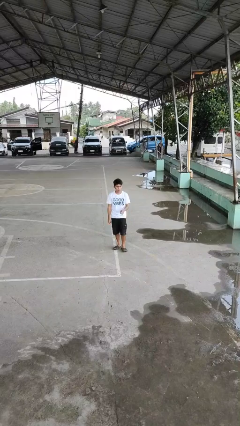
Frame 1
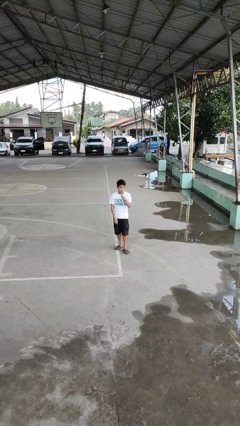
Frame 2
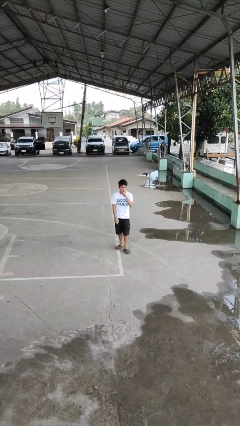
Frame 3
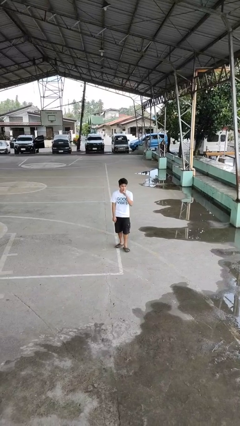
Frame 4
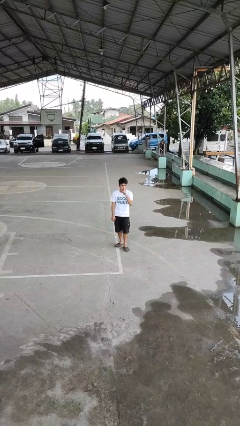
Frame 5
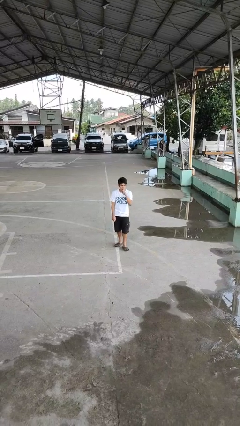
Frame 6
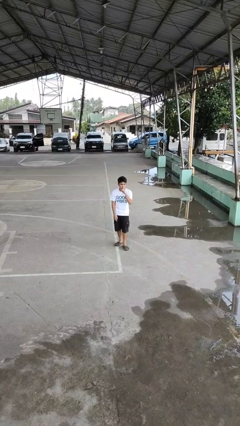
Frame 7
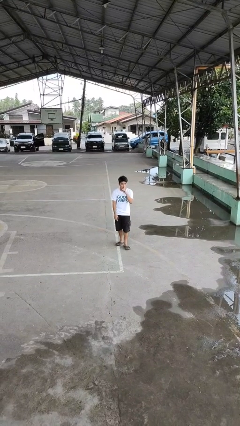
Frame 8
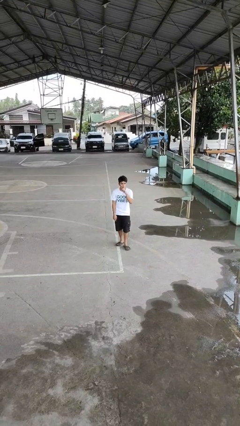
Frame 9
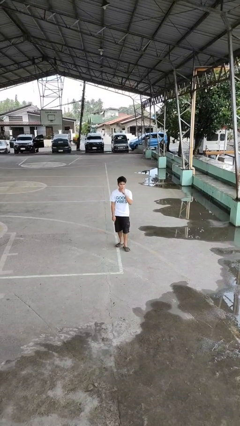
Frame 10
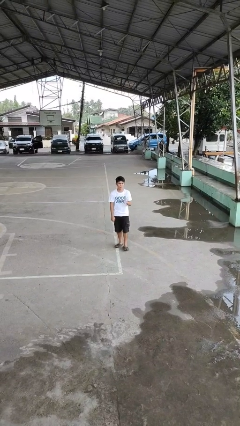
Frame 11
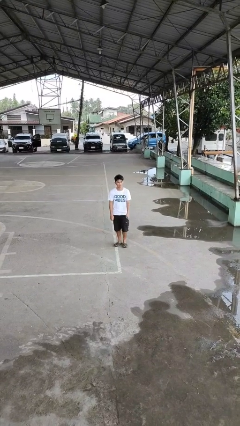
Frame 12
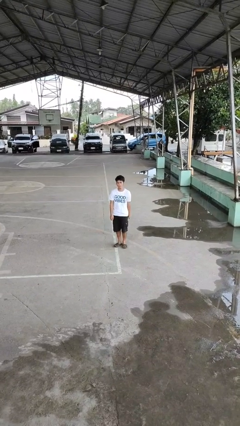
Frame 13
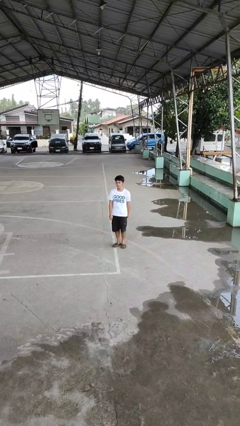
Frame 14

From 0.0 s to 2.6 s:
person gestures be quiet

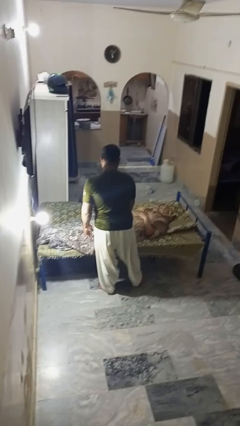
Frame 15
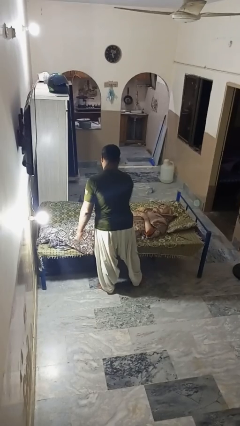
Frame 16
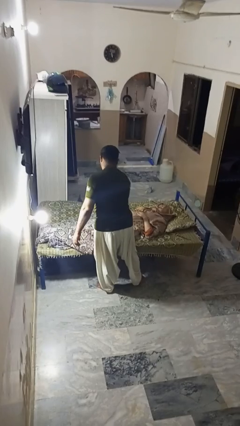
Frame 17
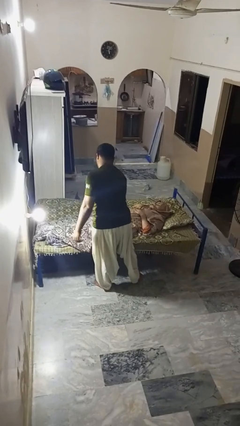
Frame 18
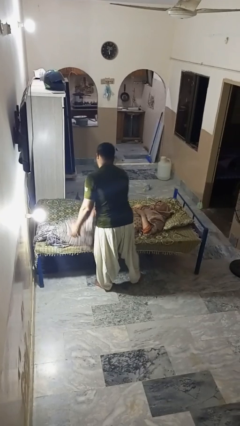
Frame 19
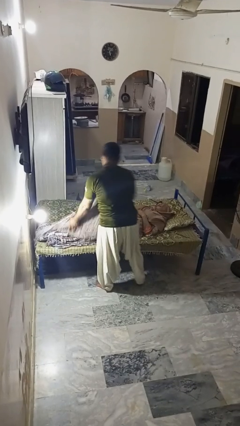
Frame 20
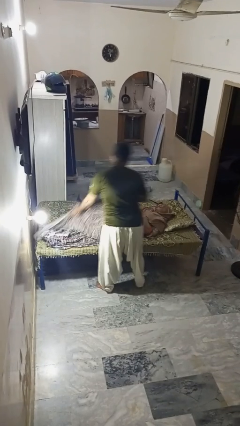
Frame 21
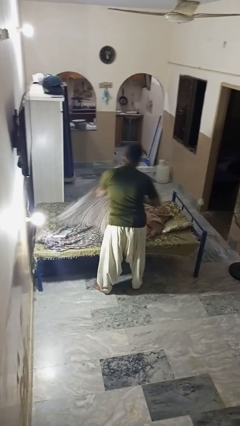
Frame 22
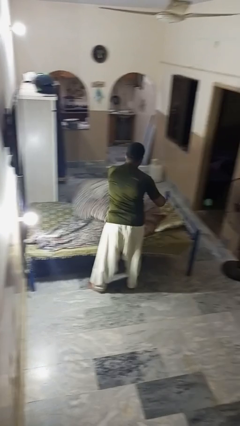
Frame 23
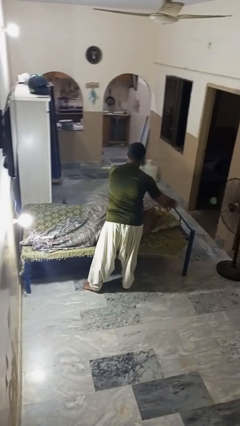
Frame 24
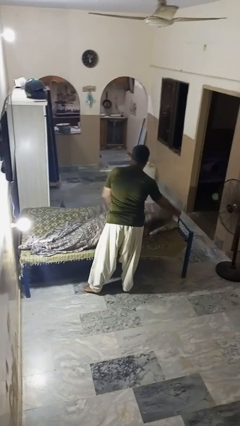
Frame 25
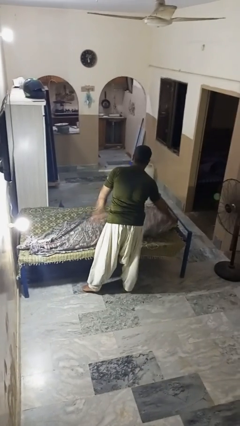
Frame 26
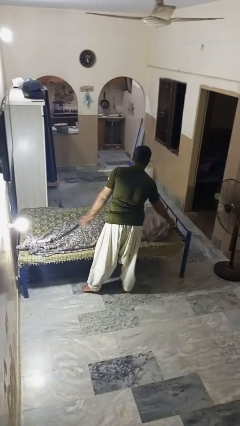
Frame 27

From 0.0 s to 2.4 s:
person covers friend with blanket

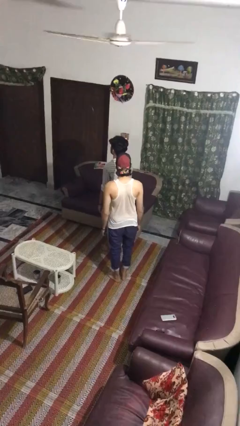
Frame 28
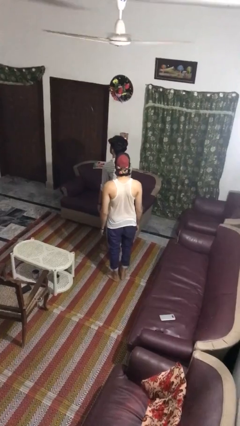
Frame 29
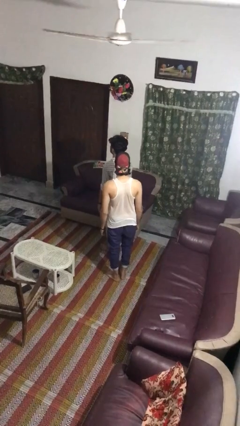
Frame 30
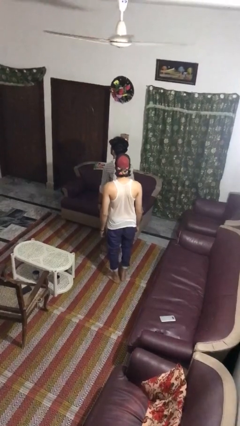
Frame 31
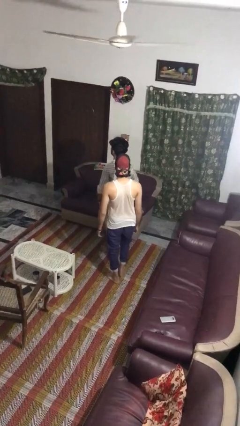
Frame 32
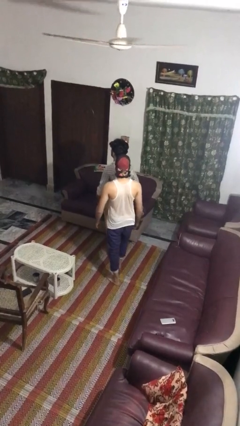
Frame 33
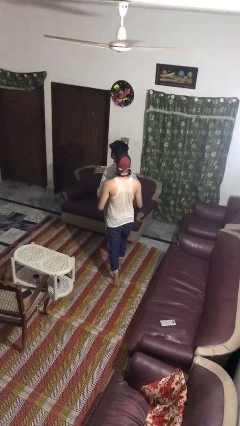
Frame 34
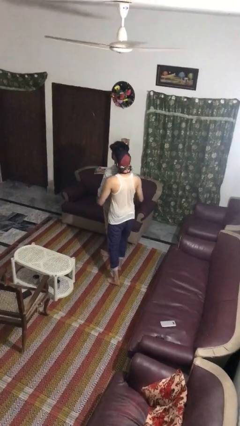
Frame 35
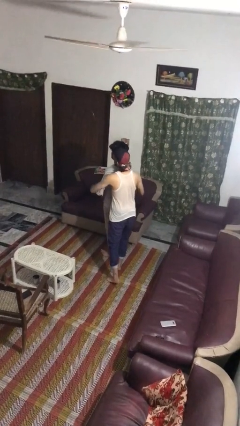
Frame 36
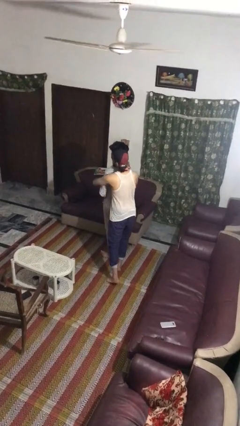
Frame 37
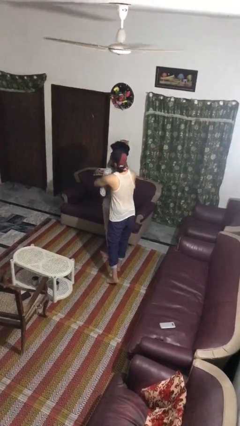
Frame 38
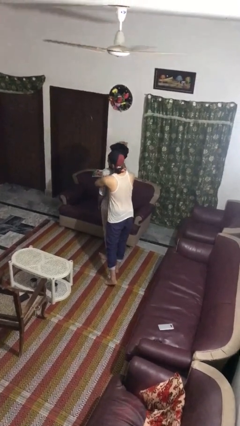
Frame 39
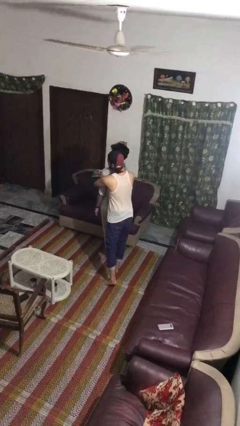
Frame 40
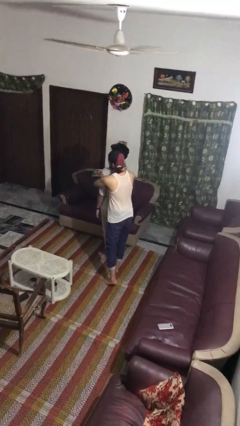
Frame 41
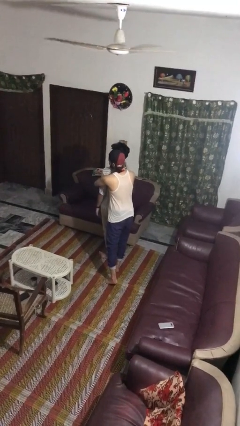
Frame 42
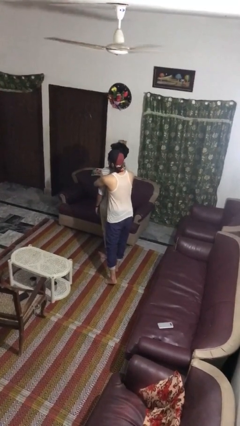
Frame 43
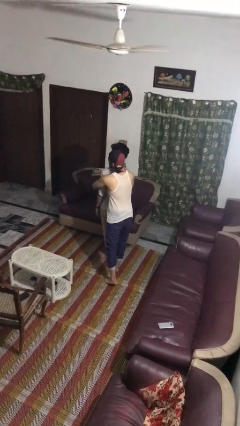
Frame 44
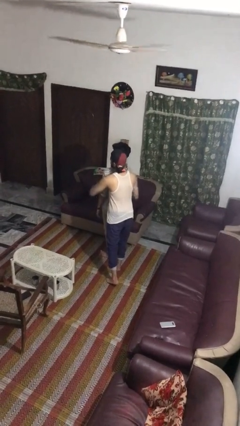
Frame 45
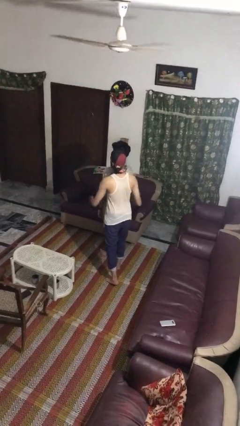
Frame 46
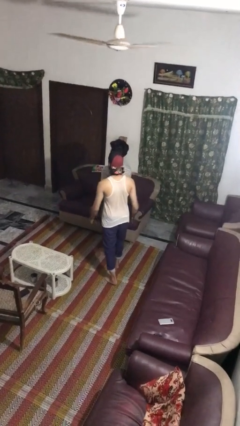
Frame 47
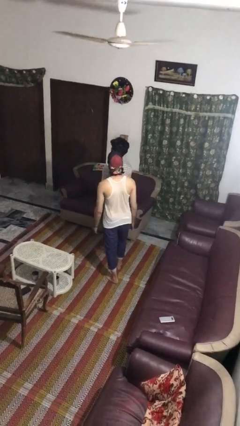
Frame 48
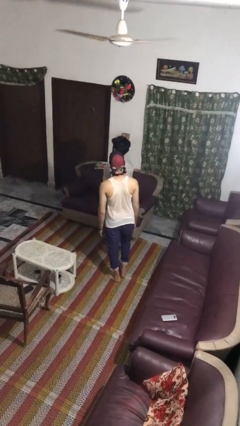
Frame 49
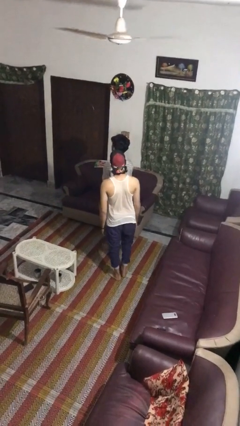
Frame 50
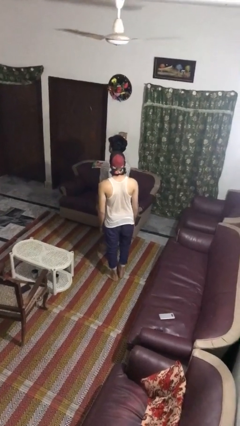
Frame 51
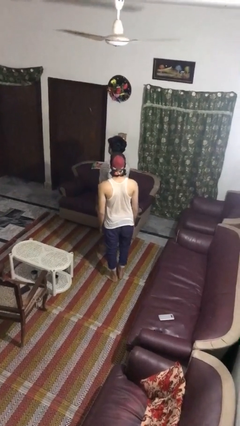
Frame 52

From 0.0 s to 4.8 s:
person hugs person from behind

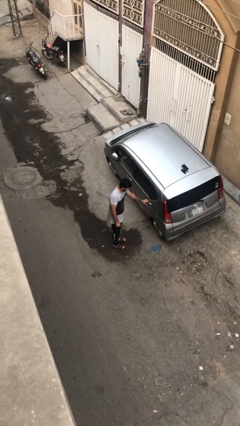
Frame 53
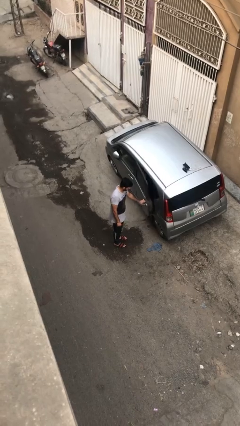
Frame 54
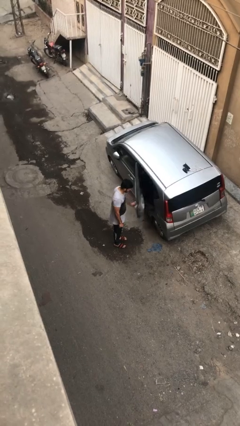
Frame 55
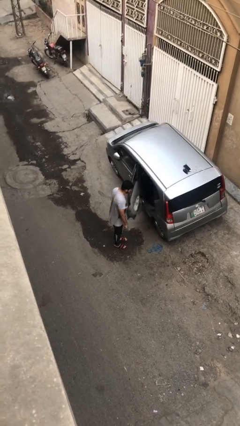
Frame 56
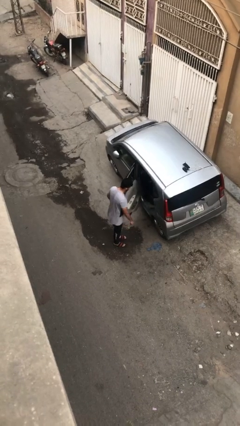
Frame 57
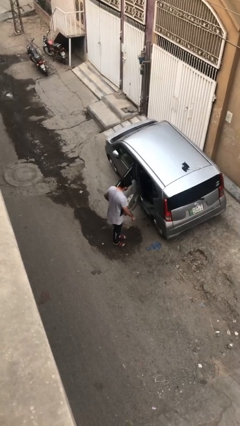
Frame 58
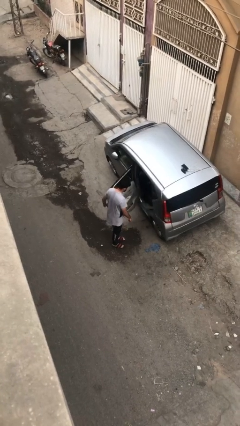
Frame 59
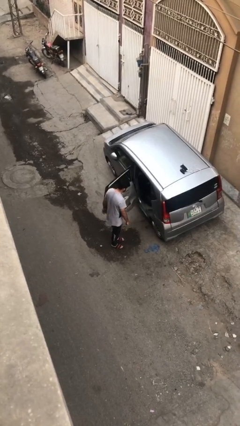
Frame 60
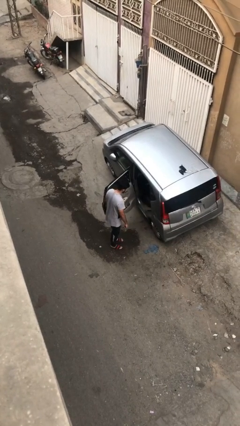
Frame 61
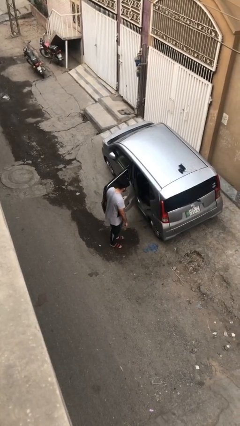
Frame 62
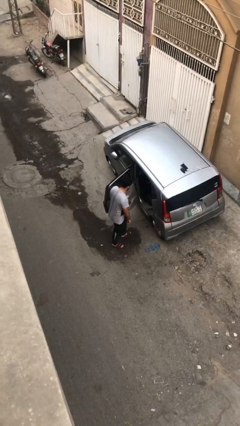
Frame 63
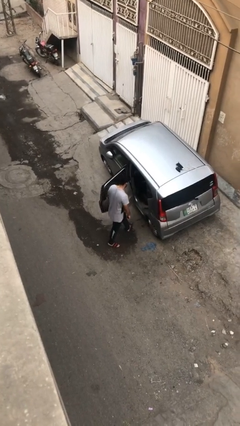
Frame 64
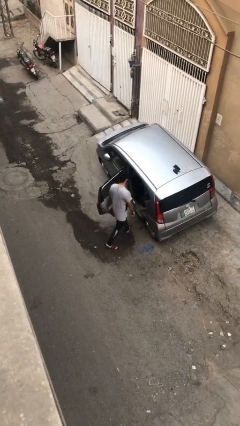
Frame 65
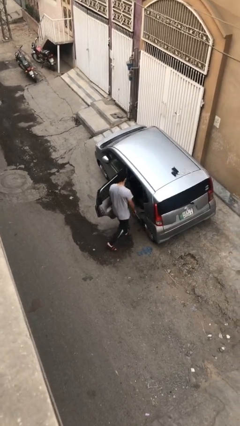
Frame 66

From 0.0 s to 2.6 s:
person opens car door

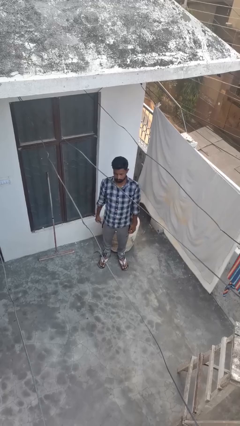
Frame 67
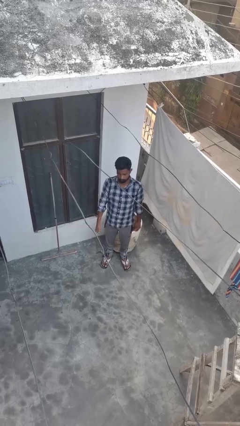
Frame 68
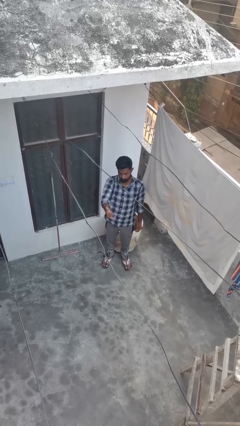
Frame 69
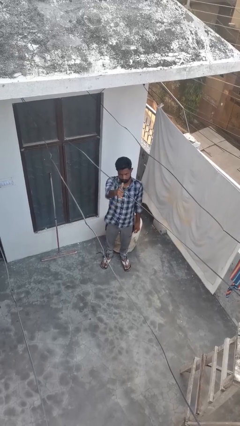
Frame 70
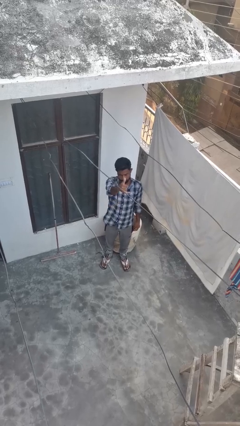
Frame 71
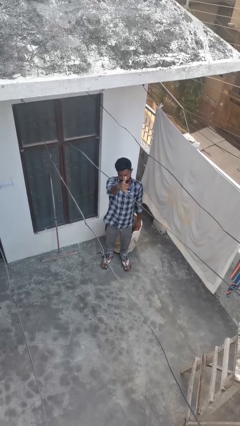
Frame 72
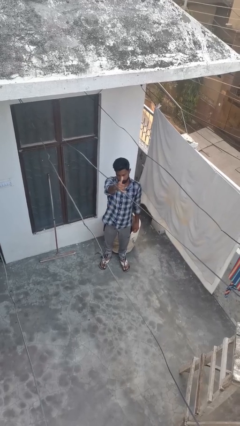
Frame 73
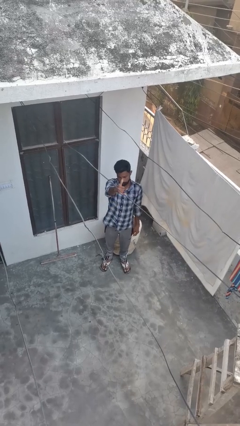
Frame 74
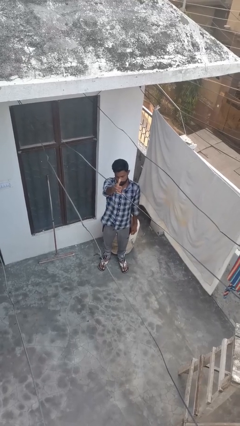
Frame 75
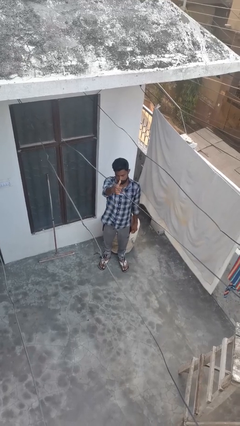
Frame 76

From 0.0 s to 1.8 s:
person gestures hang loose

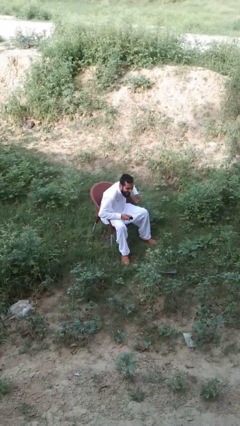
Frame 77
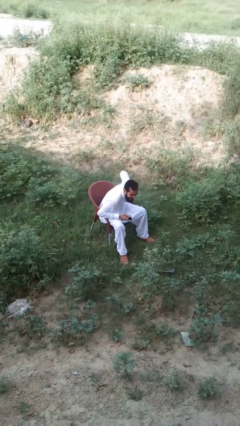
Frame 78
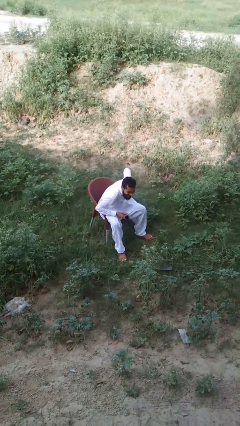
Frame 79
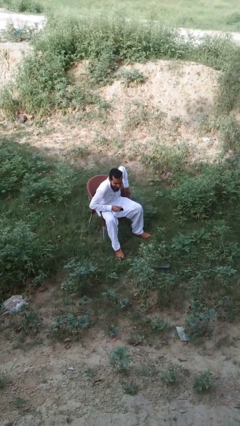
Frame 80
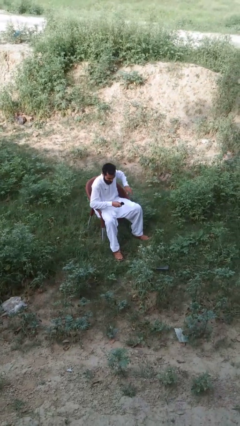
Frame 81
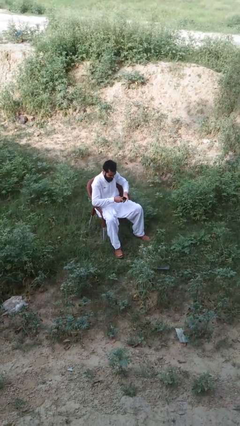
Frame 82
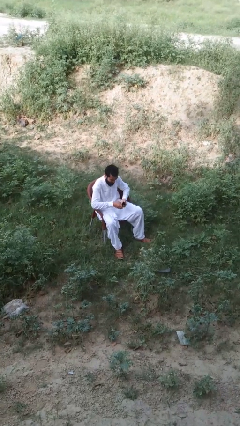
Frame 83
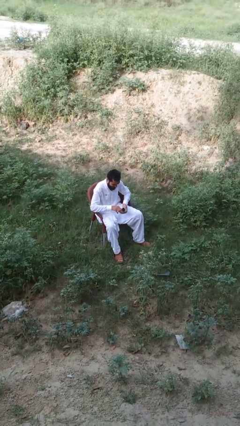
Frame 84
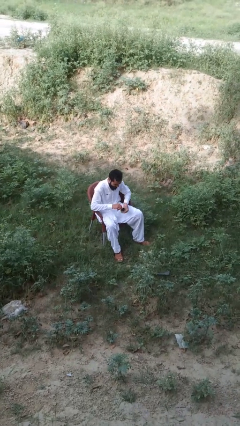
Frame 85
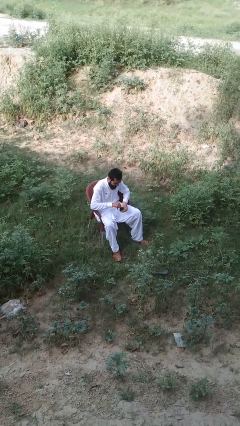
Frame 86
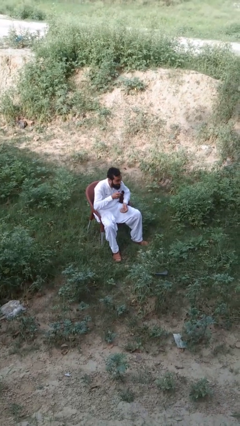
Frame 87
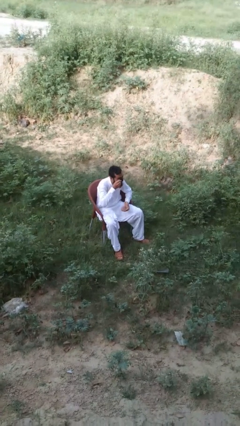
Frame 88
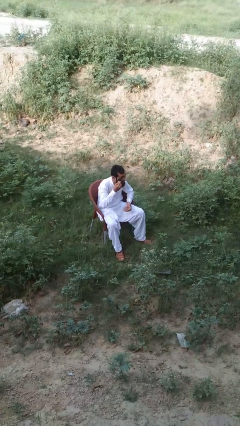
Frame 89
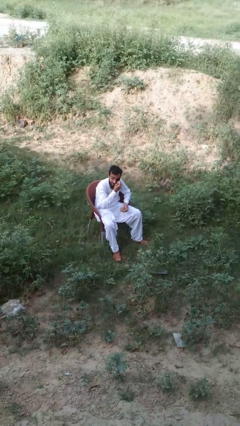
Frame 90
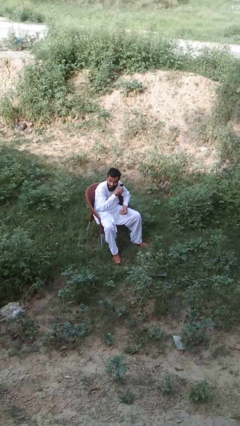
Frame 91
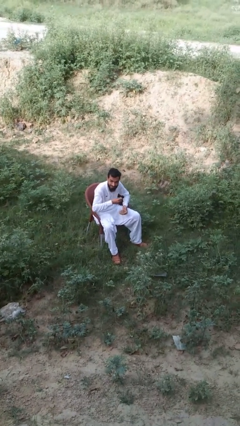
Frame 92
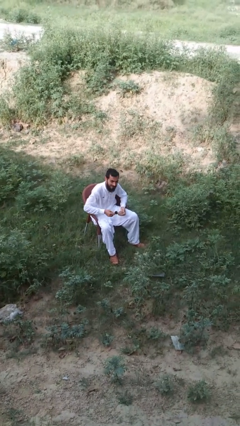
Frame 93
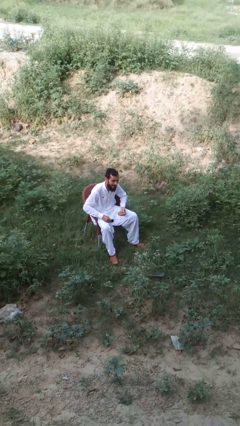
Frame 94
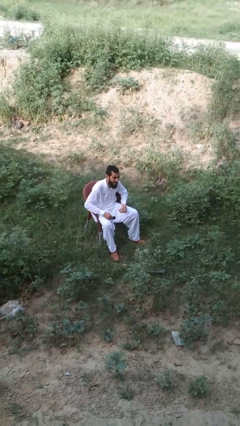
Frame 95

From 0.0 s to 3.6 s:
person shades eyes
